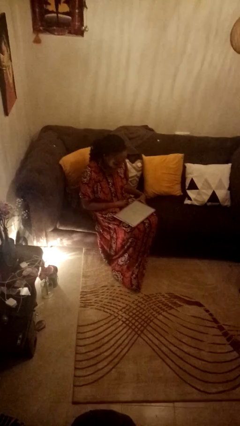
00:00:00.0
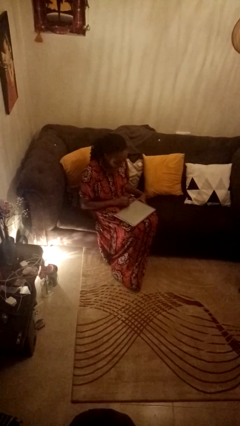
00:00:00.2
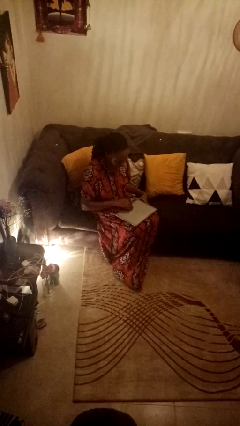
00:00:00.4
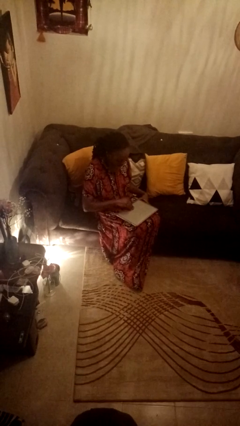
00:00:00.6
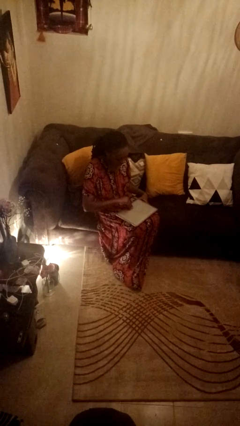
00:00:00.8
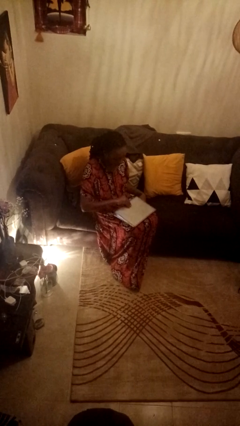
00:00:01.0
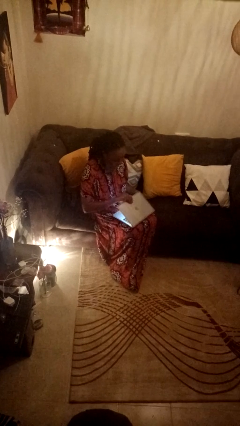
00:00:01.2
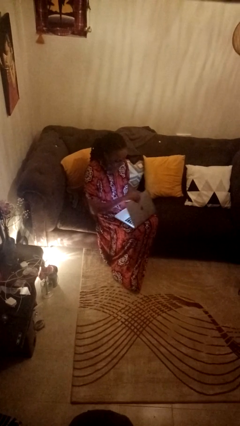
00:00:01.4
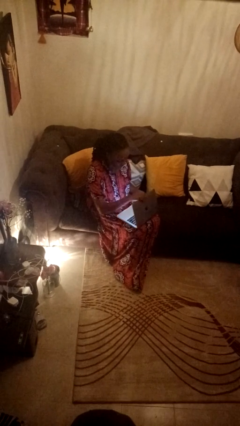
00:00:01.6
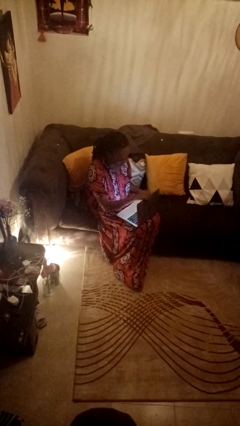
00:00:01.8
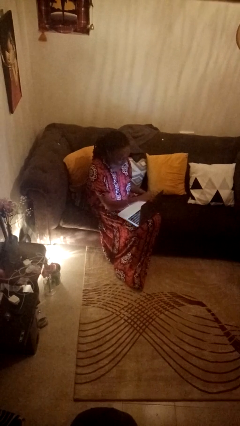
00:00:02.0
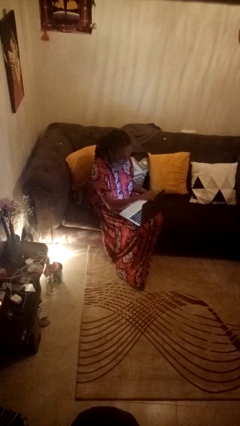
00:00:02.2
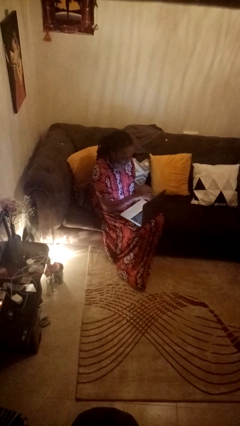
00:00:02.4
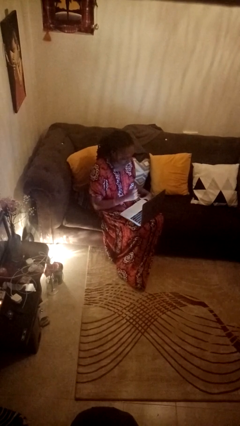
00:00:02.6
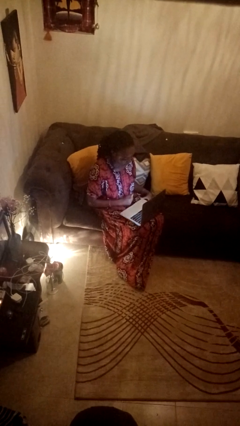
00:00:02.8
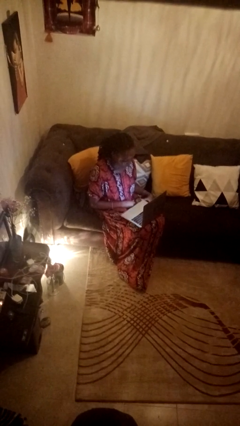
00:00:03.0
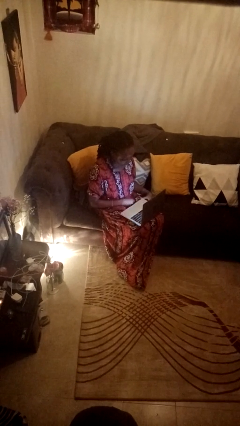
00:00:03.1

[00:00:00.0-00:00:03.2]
person opens laptop

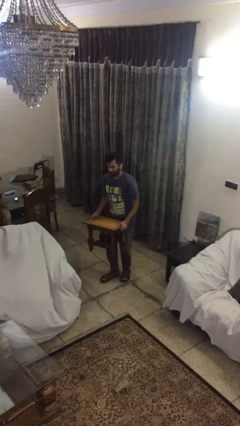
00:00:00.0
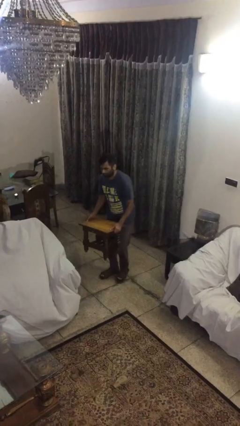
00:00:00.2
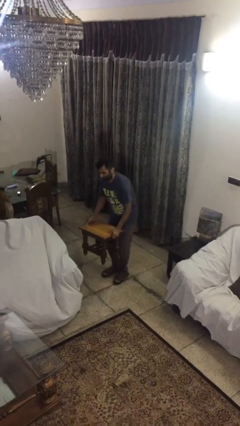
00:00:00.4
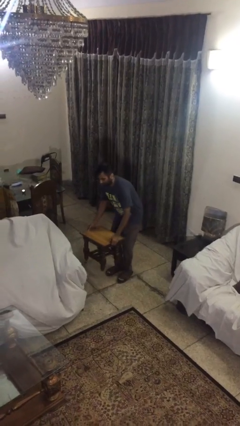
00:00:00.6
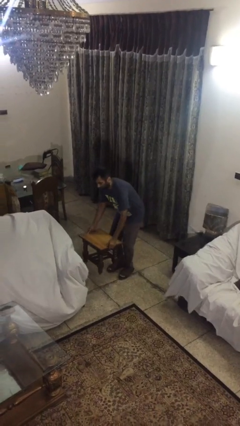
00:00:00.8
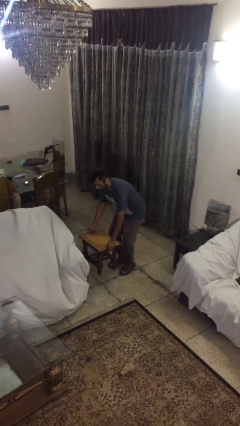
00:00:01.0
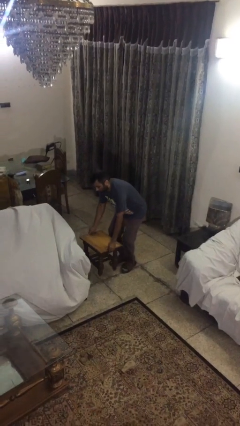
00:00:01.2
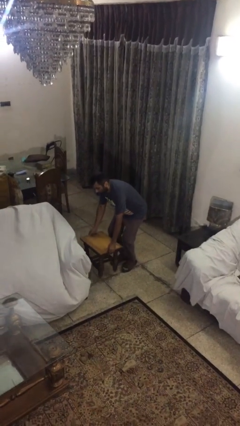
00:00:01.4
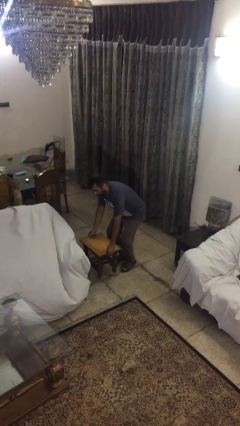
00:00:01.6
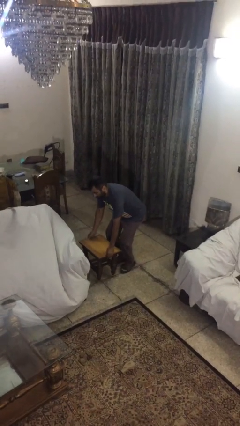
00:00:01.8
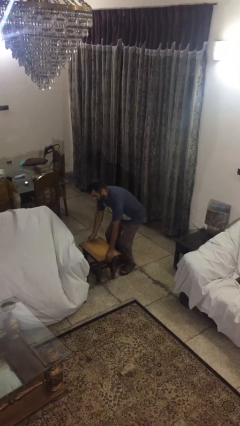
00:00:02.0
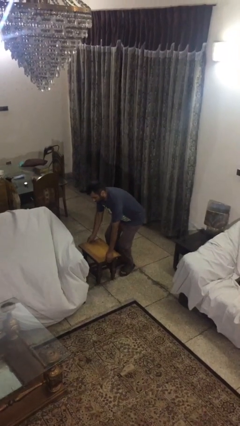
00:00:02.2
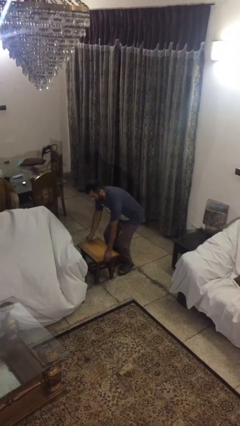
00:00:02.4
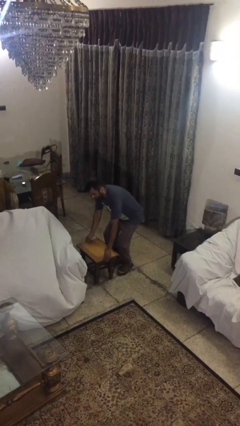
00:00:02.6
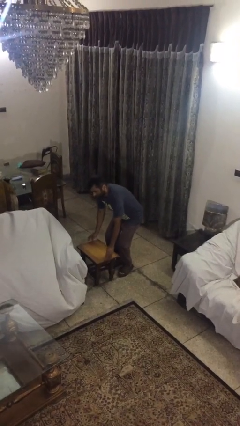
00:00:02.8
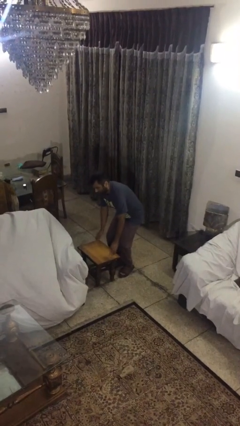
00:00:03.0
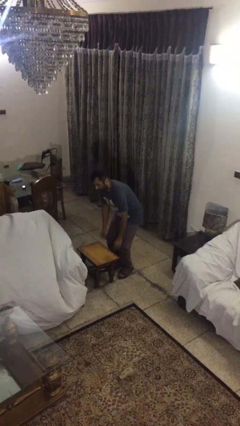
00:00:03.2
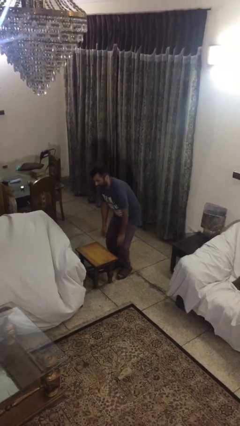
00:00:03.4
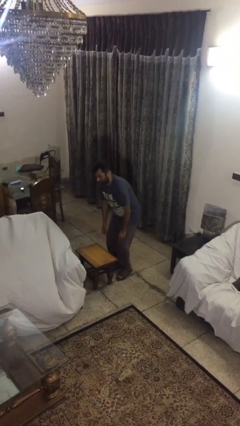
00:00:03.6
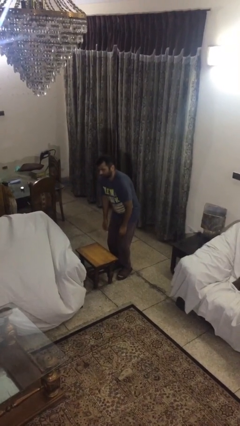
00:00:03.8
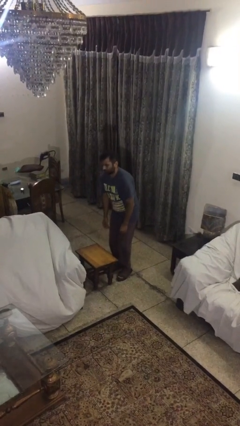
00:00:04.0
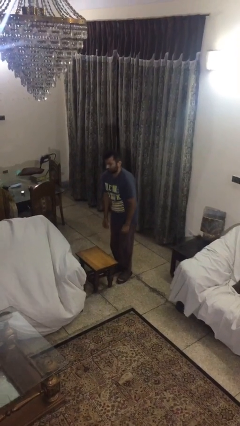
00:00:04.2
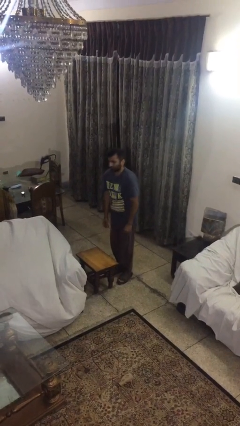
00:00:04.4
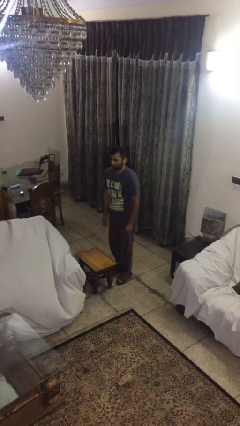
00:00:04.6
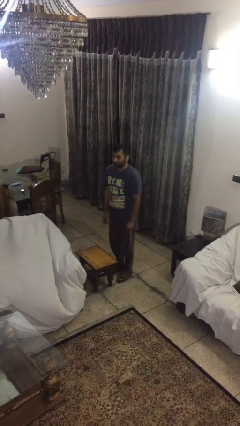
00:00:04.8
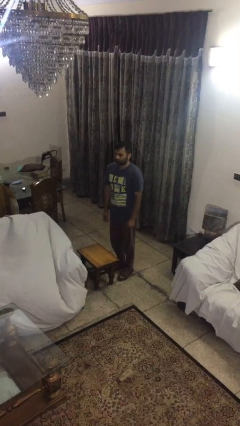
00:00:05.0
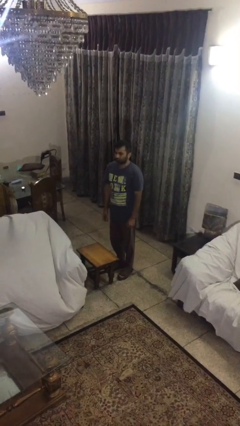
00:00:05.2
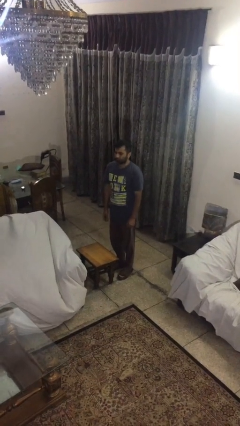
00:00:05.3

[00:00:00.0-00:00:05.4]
person puts down object on floor

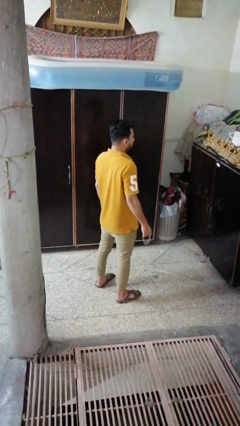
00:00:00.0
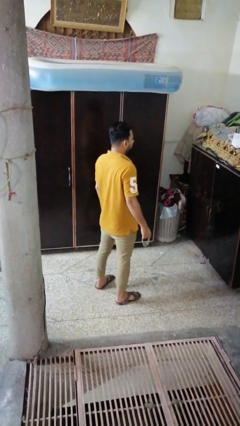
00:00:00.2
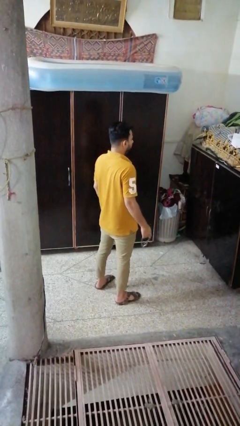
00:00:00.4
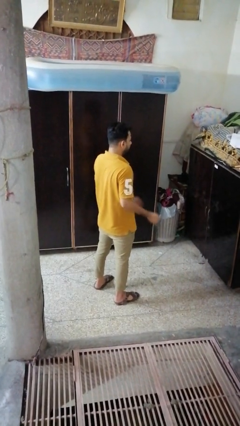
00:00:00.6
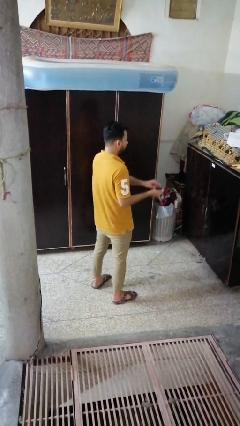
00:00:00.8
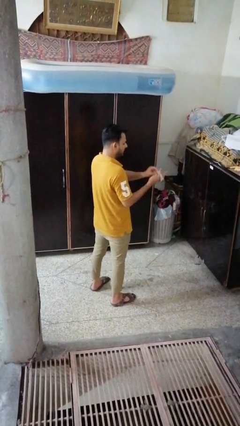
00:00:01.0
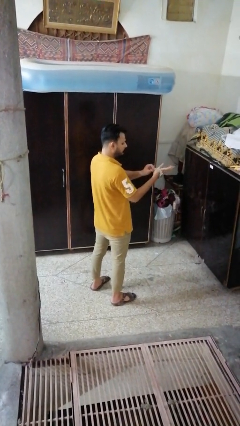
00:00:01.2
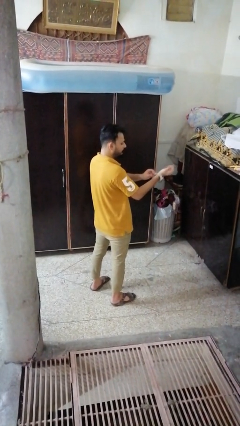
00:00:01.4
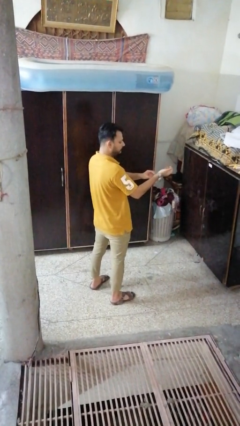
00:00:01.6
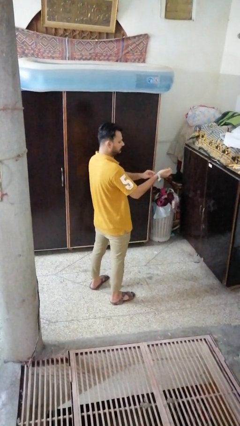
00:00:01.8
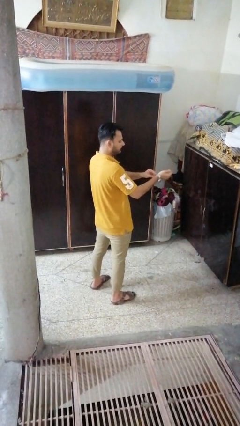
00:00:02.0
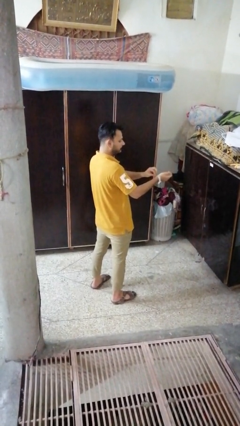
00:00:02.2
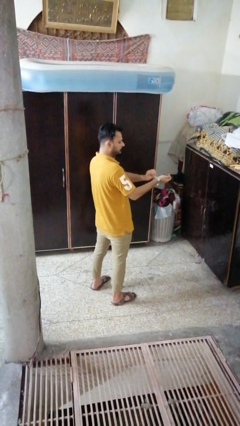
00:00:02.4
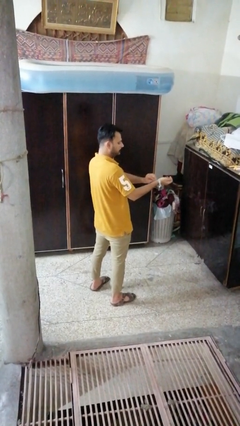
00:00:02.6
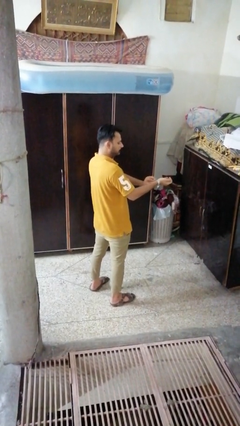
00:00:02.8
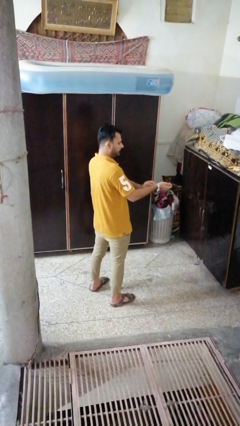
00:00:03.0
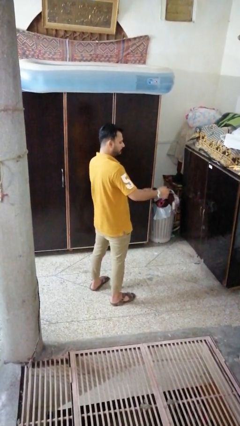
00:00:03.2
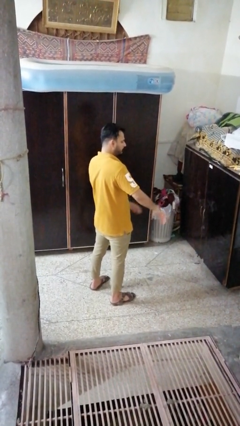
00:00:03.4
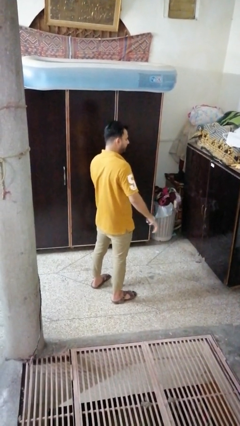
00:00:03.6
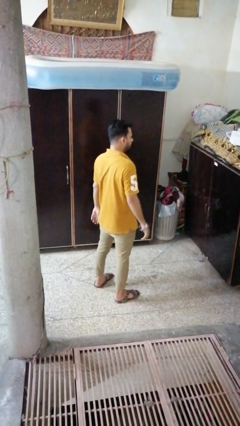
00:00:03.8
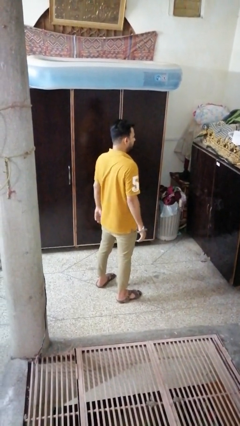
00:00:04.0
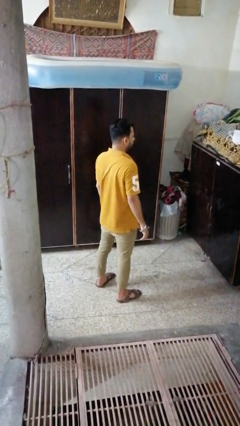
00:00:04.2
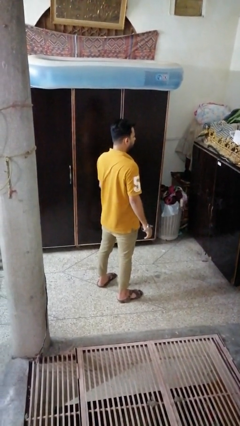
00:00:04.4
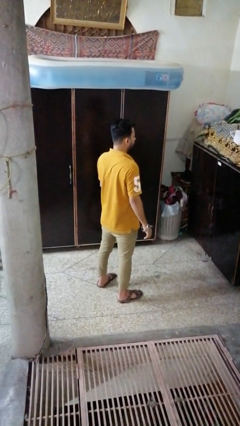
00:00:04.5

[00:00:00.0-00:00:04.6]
person puts on wristwatch

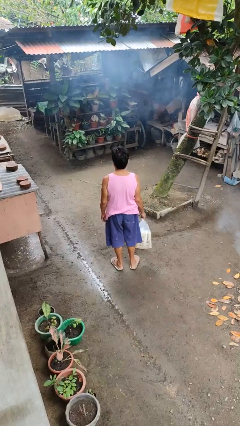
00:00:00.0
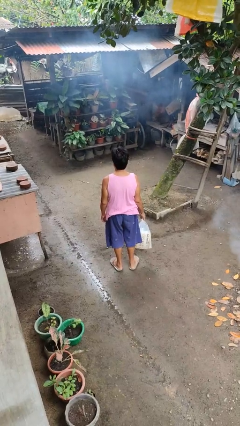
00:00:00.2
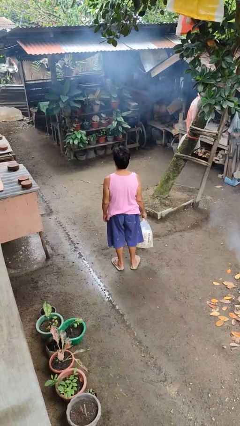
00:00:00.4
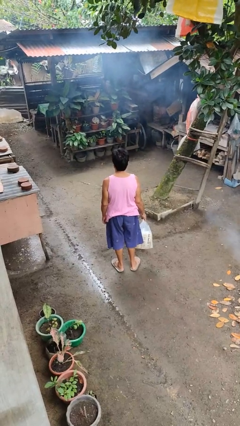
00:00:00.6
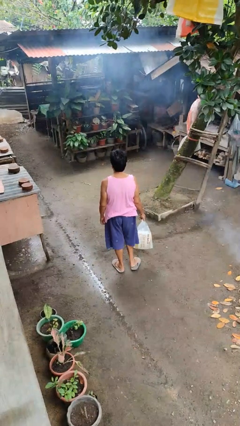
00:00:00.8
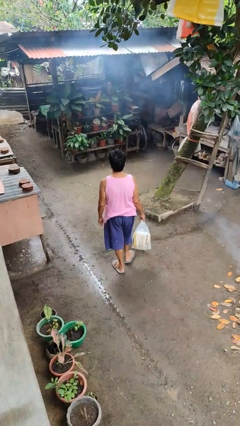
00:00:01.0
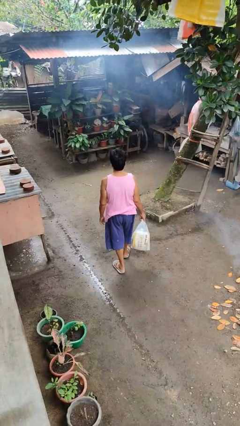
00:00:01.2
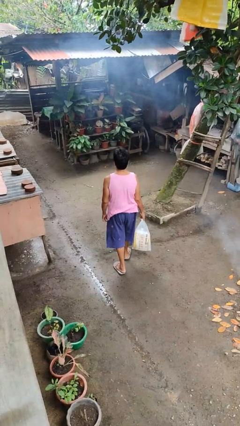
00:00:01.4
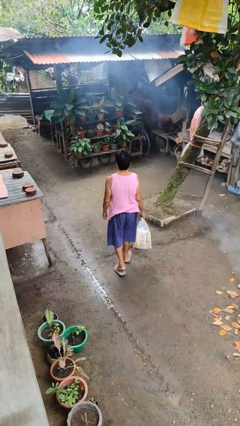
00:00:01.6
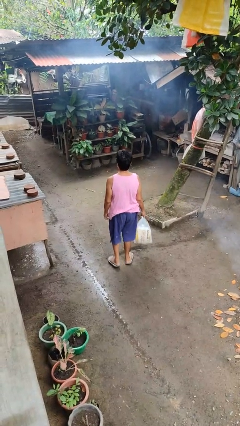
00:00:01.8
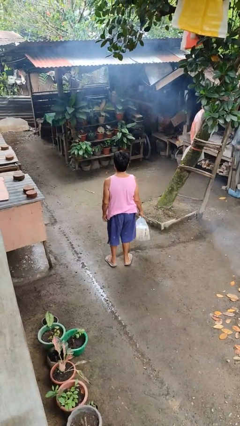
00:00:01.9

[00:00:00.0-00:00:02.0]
person carries groceries

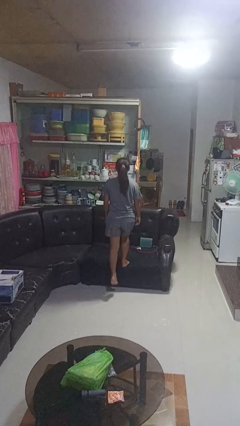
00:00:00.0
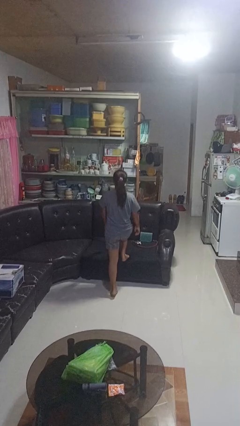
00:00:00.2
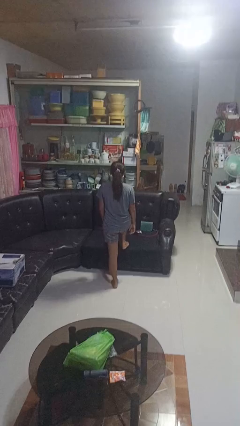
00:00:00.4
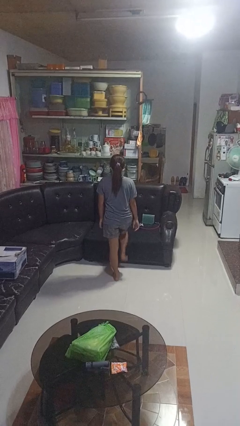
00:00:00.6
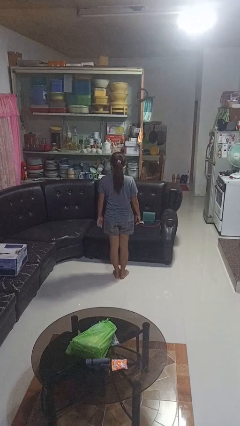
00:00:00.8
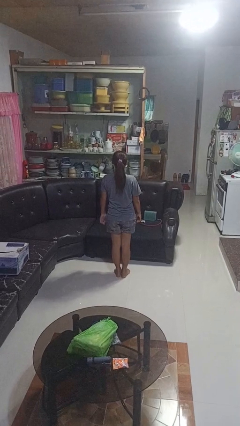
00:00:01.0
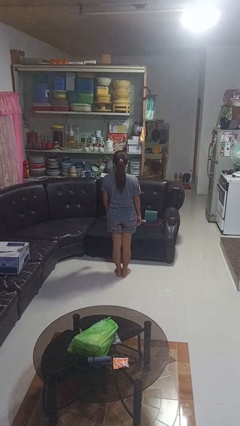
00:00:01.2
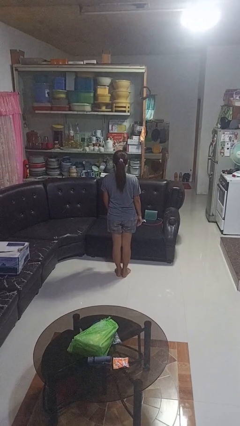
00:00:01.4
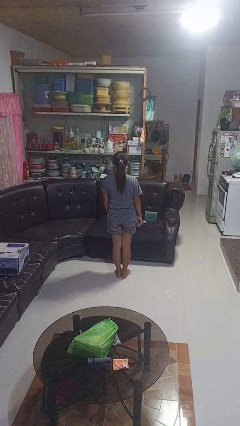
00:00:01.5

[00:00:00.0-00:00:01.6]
person climbs off couch

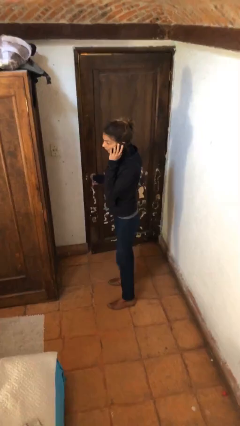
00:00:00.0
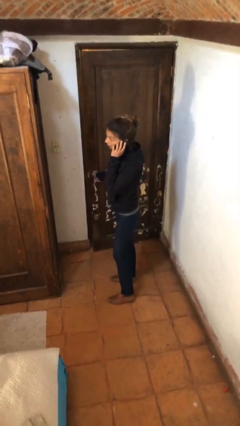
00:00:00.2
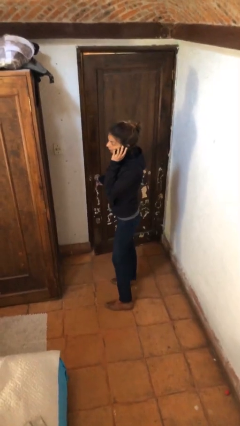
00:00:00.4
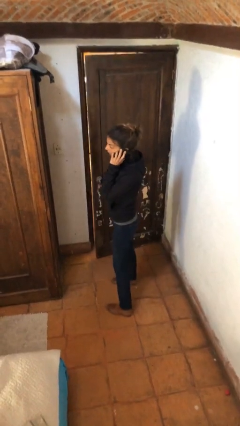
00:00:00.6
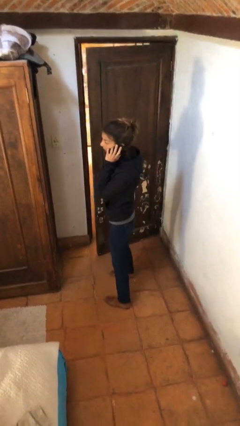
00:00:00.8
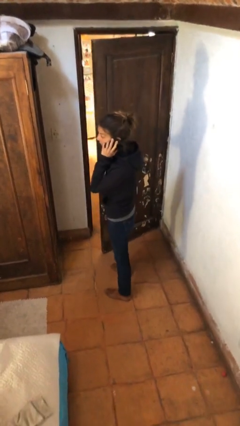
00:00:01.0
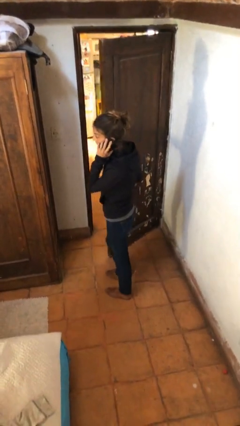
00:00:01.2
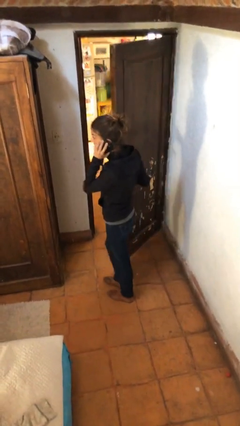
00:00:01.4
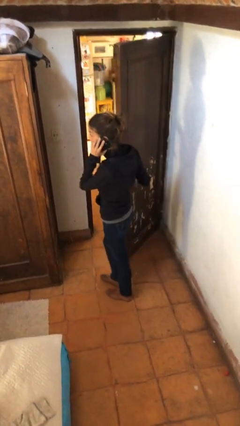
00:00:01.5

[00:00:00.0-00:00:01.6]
person opens facility door
